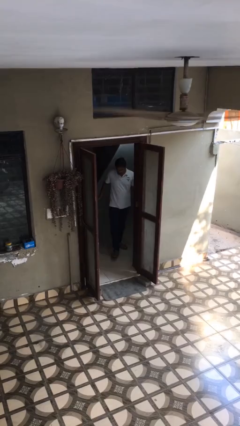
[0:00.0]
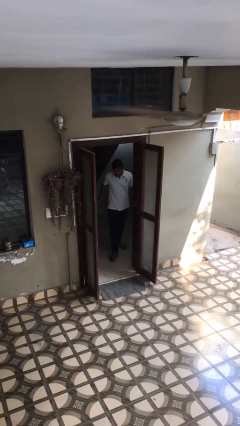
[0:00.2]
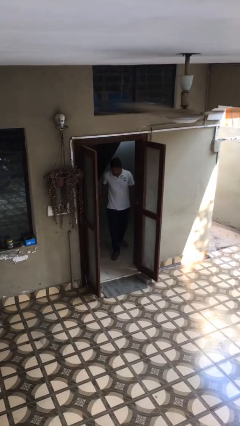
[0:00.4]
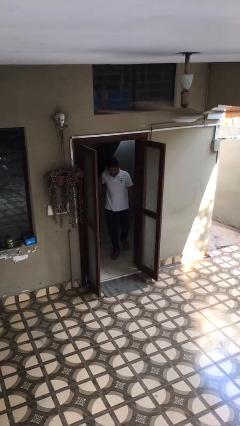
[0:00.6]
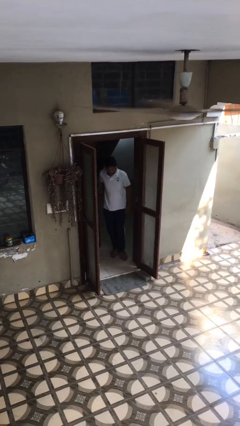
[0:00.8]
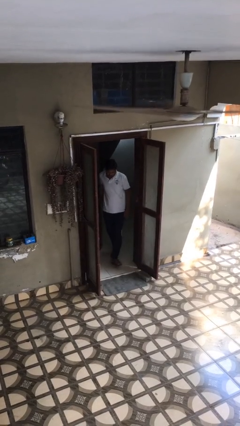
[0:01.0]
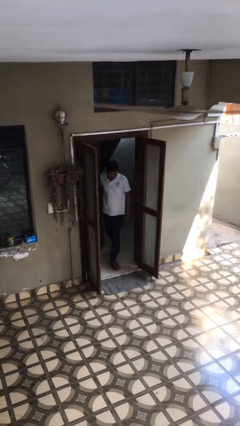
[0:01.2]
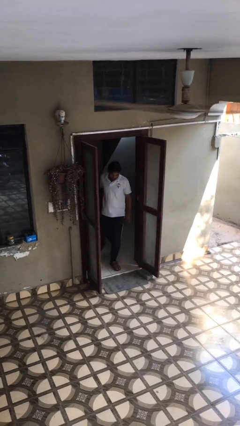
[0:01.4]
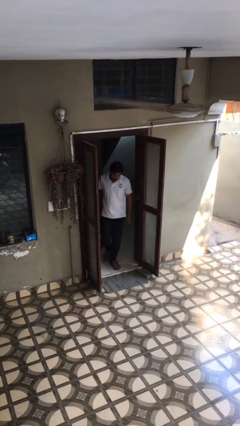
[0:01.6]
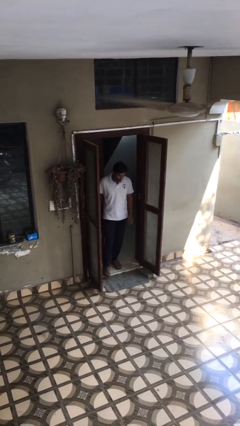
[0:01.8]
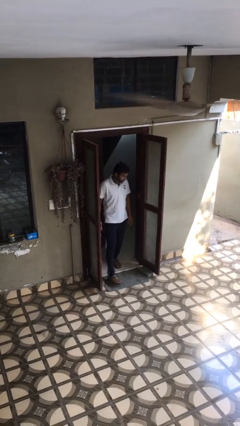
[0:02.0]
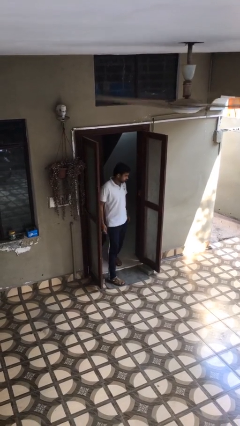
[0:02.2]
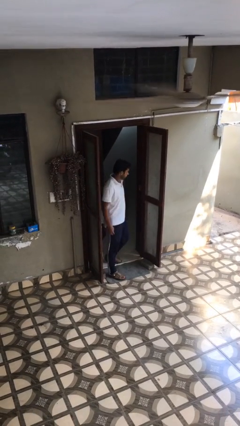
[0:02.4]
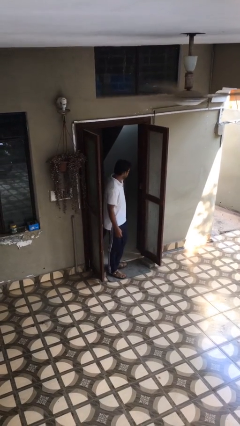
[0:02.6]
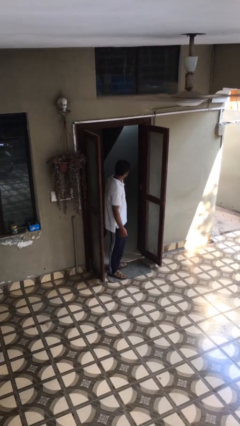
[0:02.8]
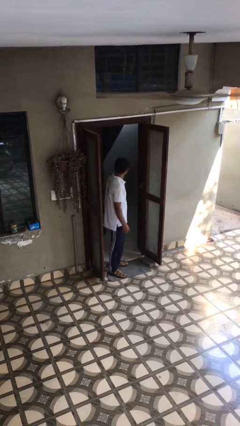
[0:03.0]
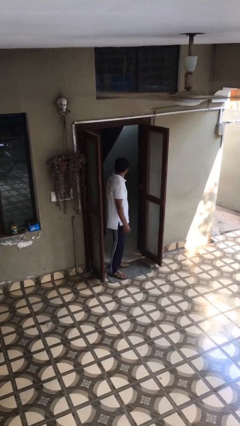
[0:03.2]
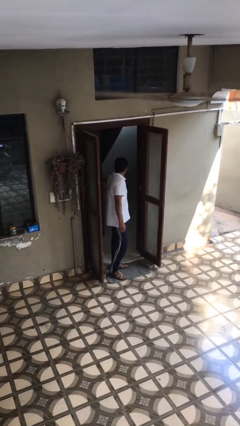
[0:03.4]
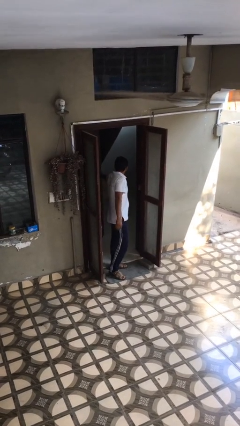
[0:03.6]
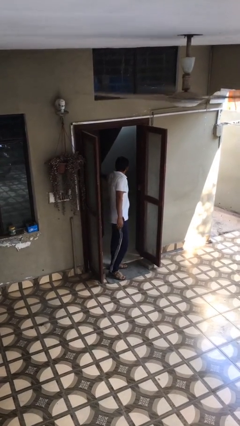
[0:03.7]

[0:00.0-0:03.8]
person enters scene through structure

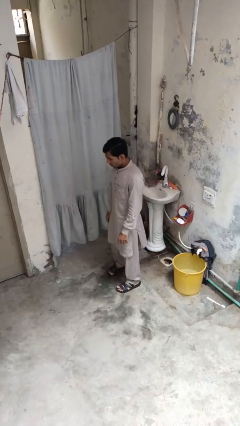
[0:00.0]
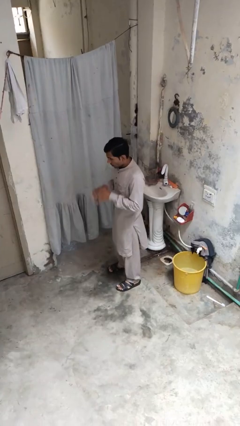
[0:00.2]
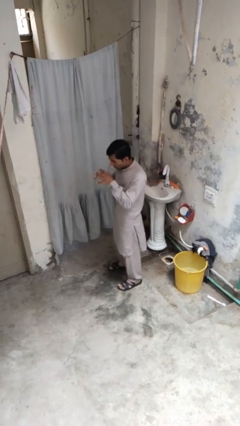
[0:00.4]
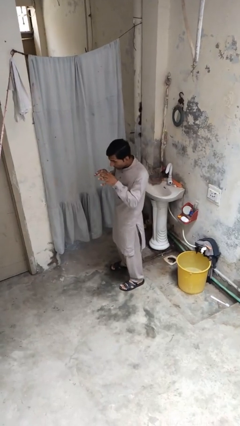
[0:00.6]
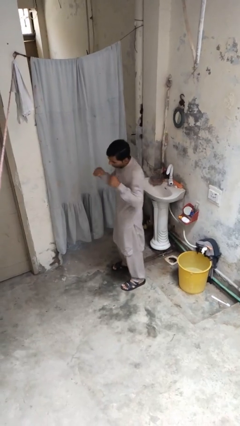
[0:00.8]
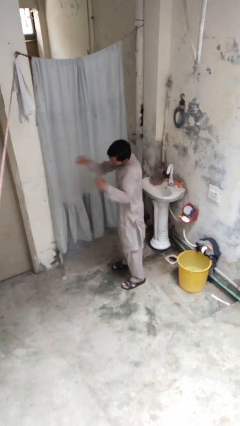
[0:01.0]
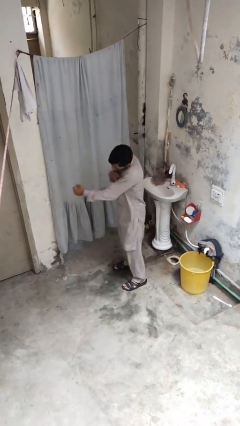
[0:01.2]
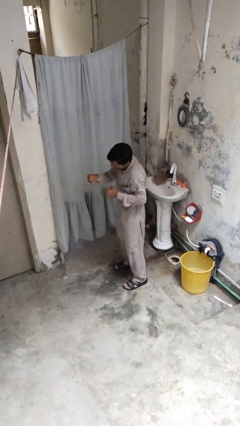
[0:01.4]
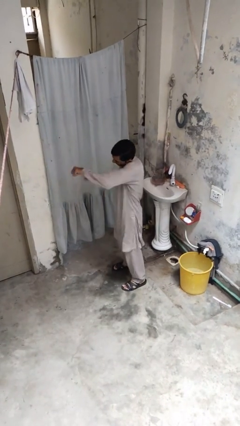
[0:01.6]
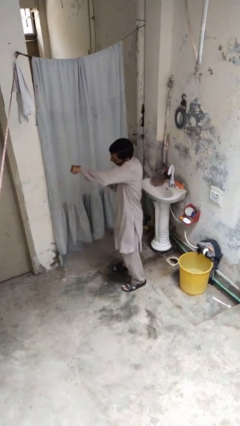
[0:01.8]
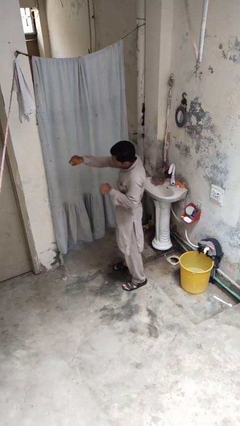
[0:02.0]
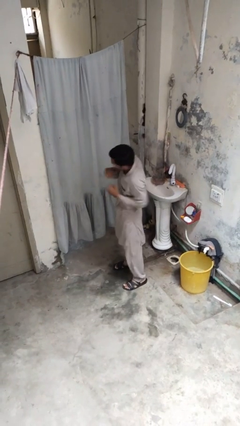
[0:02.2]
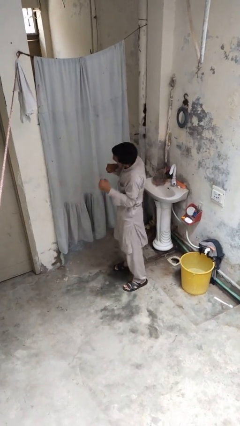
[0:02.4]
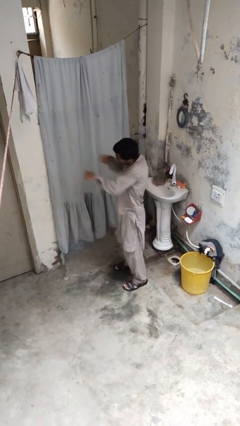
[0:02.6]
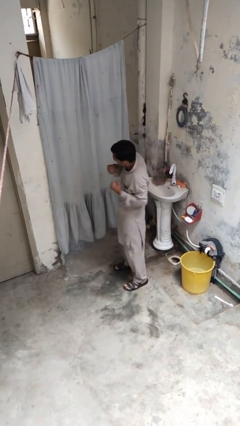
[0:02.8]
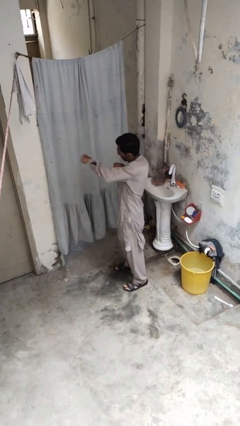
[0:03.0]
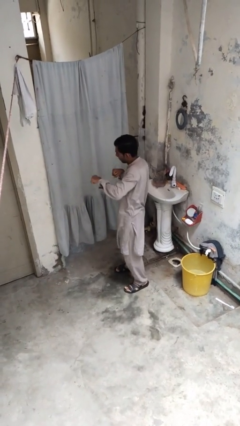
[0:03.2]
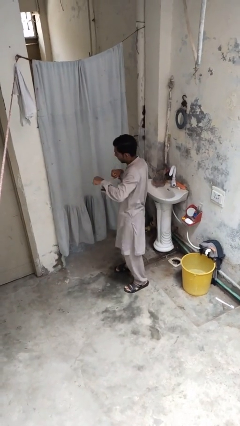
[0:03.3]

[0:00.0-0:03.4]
person punches

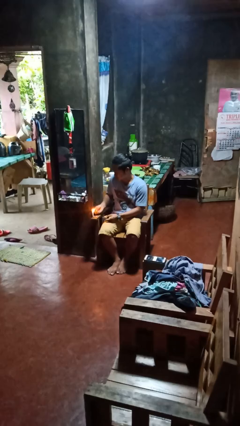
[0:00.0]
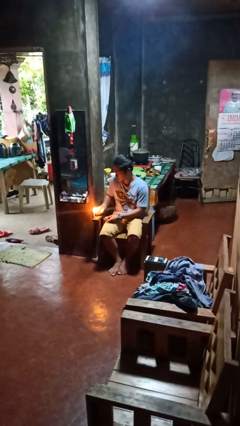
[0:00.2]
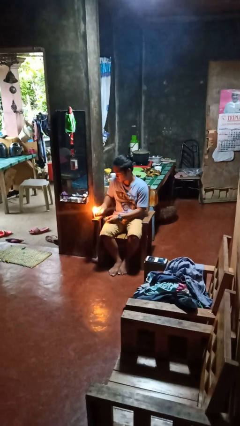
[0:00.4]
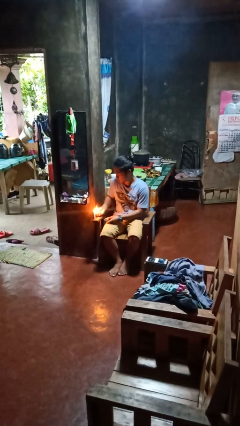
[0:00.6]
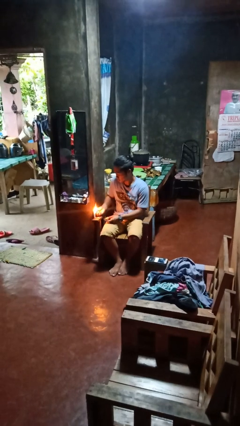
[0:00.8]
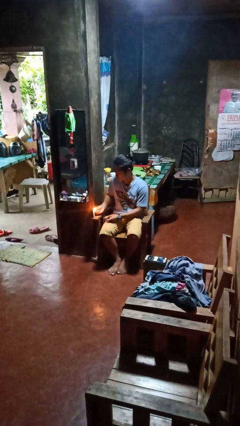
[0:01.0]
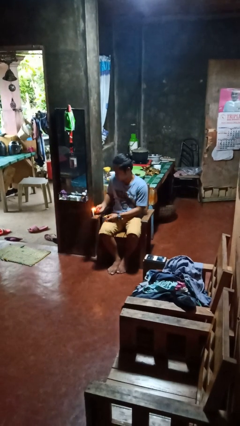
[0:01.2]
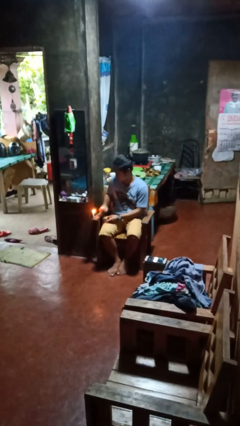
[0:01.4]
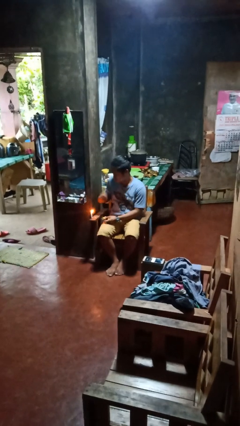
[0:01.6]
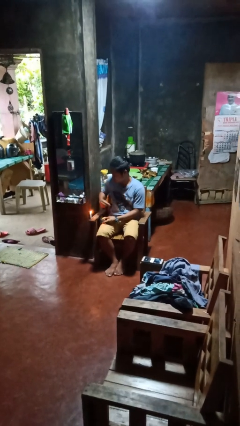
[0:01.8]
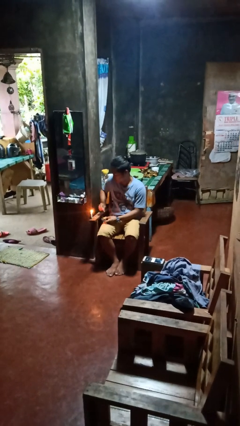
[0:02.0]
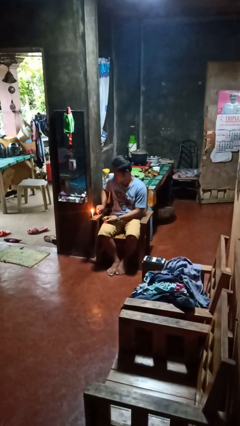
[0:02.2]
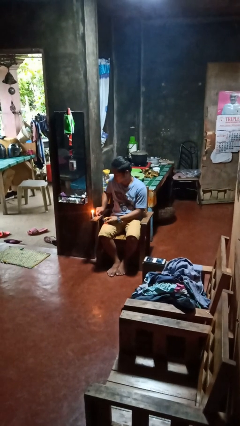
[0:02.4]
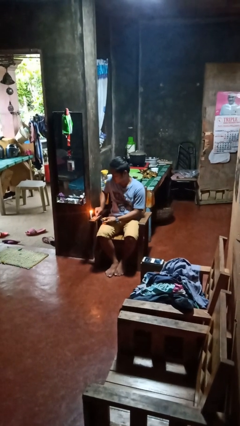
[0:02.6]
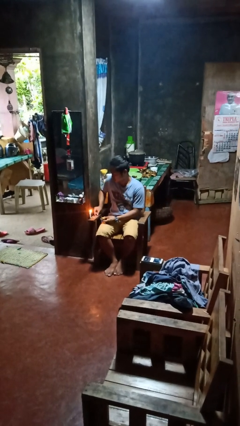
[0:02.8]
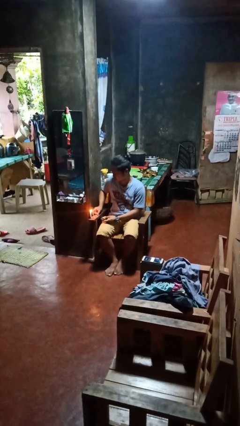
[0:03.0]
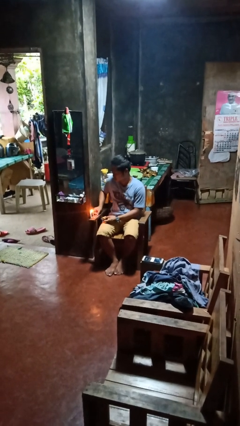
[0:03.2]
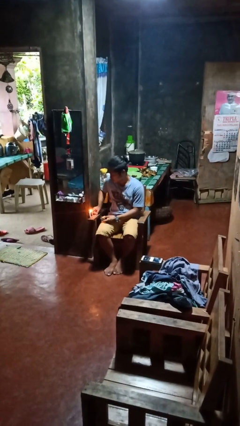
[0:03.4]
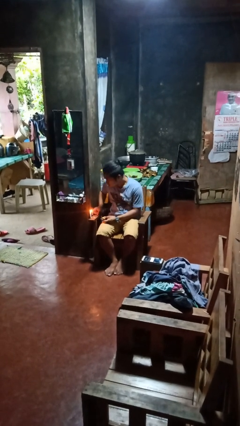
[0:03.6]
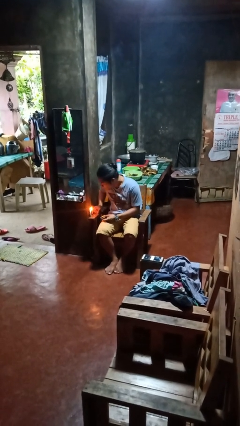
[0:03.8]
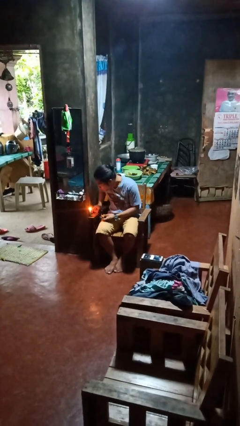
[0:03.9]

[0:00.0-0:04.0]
person lights candle

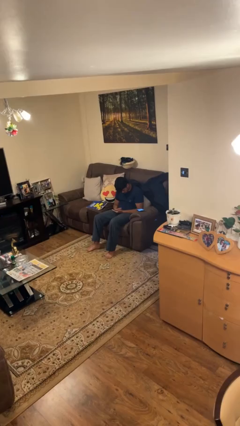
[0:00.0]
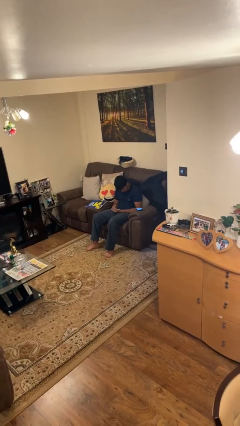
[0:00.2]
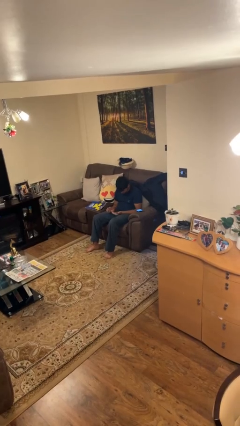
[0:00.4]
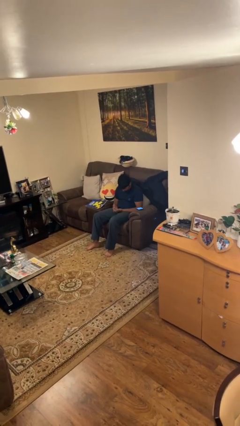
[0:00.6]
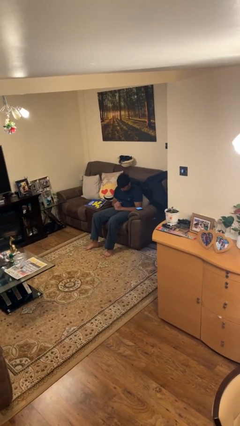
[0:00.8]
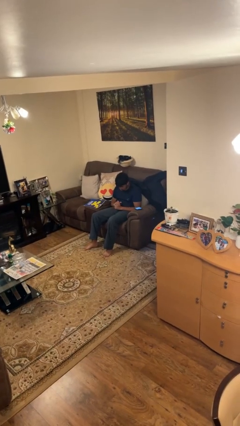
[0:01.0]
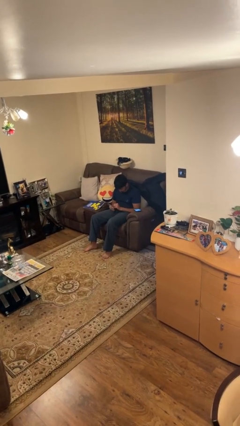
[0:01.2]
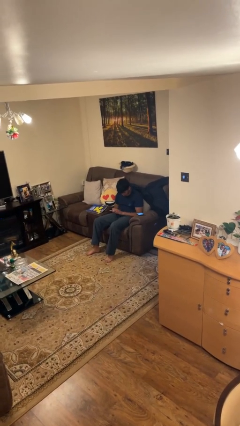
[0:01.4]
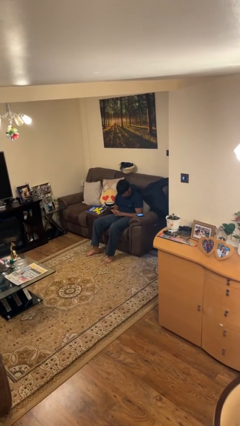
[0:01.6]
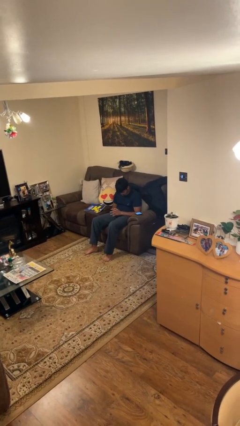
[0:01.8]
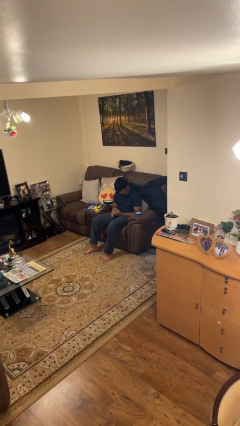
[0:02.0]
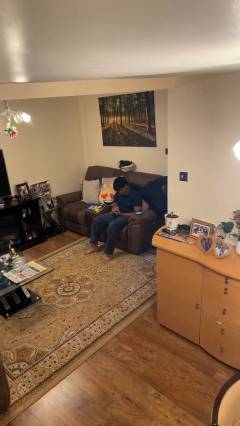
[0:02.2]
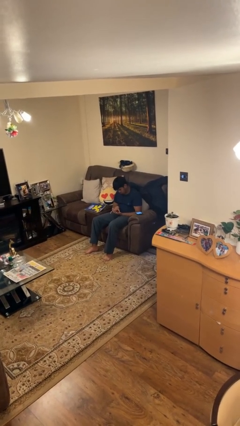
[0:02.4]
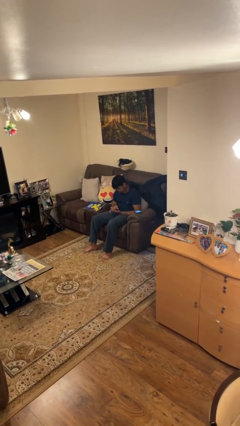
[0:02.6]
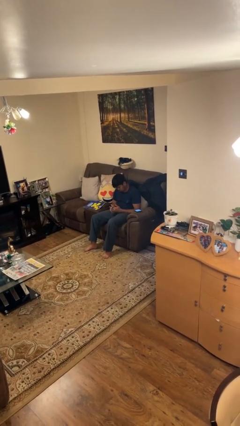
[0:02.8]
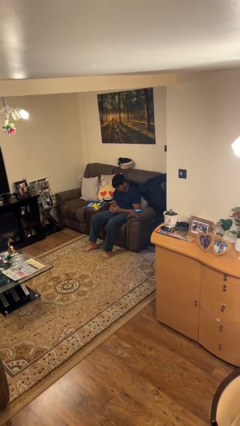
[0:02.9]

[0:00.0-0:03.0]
person looks at hands in lap

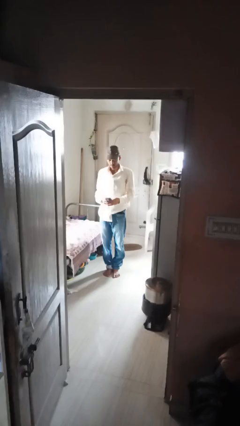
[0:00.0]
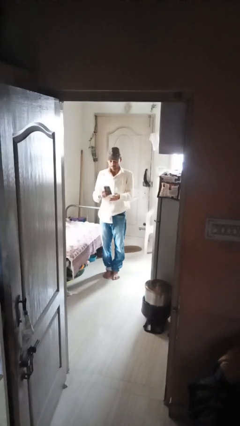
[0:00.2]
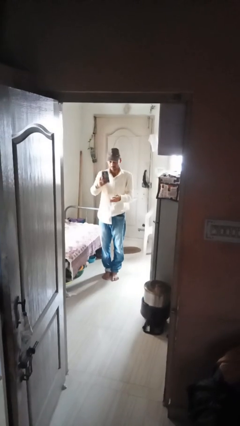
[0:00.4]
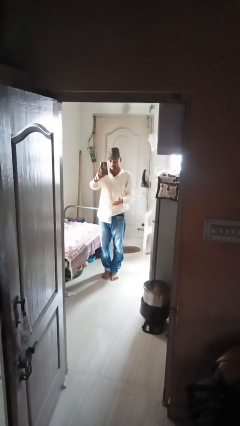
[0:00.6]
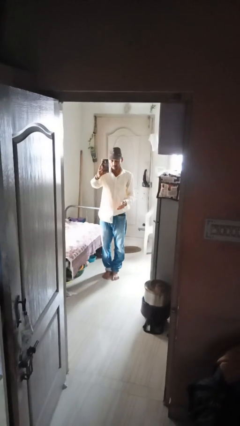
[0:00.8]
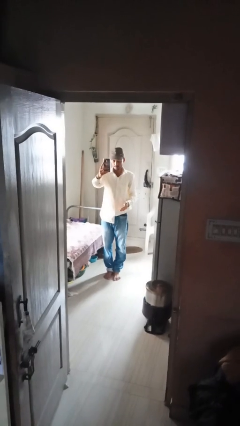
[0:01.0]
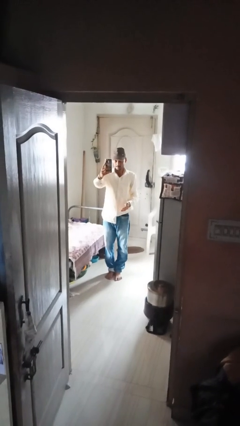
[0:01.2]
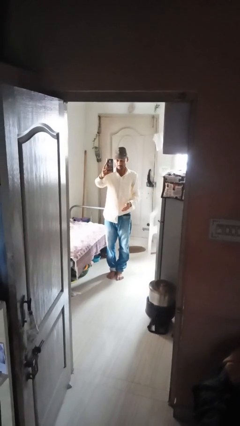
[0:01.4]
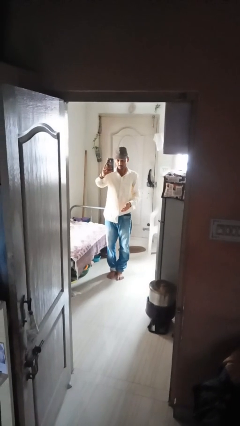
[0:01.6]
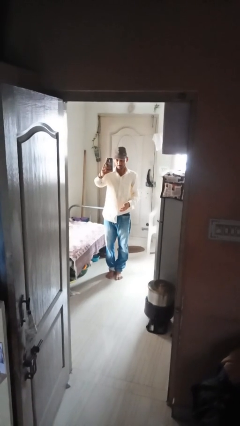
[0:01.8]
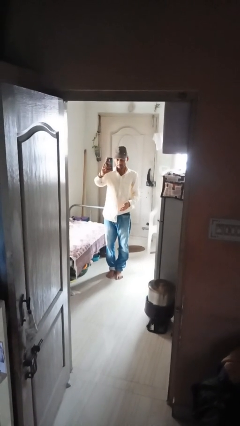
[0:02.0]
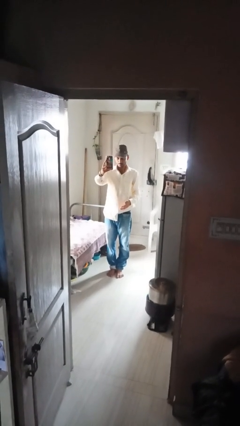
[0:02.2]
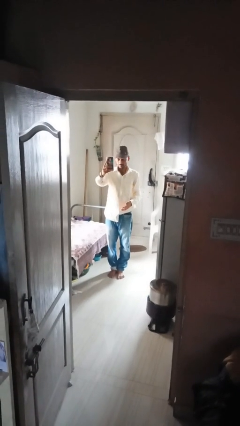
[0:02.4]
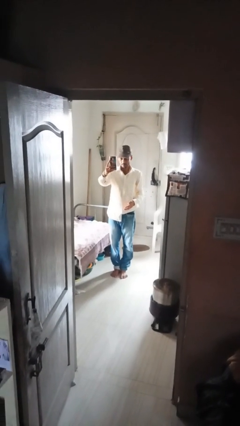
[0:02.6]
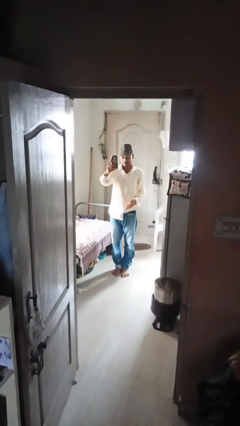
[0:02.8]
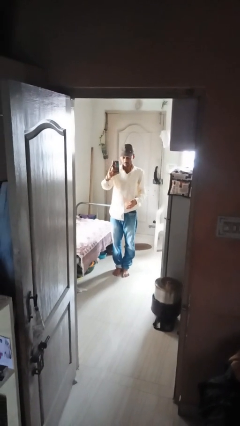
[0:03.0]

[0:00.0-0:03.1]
person takes selfie

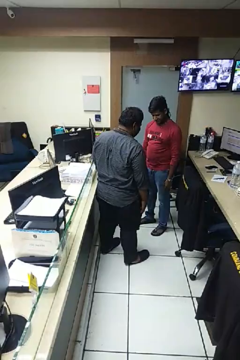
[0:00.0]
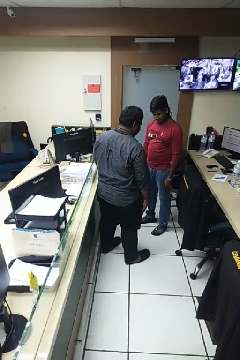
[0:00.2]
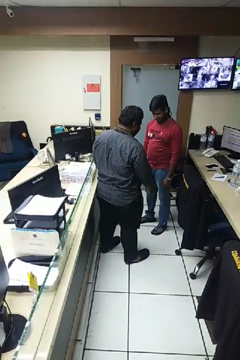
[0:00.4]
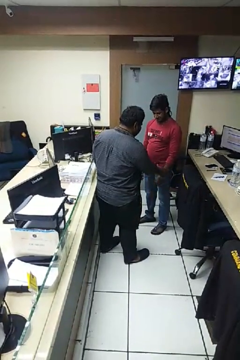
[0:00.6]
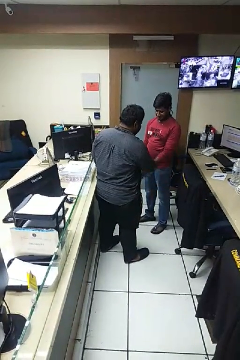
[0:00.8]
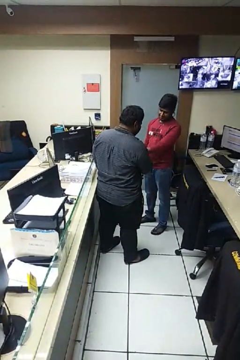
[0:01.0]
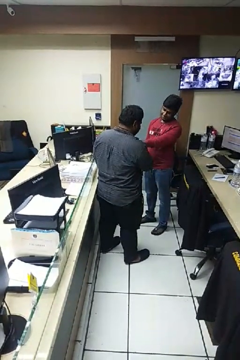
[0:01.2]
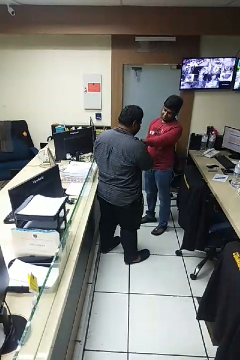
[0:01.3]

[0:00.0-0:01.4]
person grabs person by forearm
